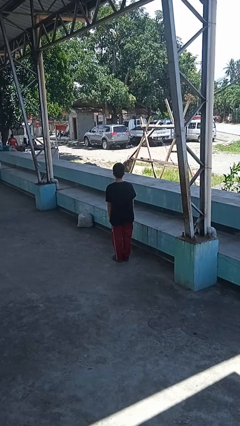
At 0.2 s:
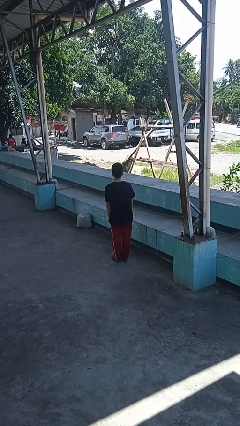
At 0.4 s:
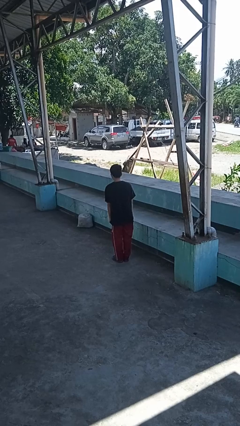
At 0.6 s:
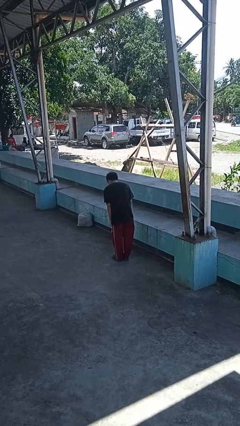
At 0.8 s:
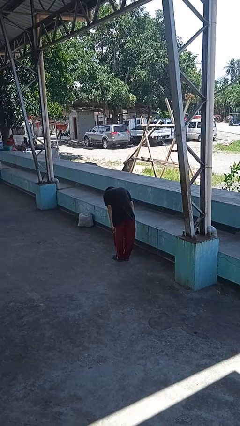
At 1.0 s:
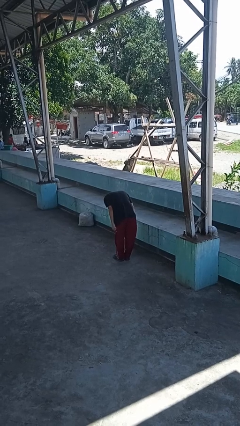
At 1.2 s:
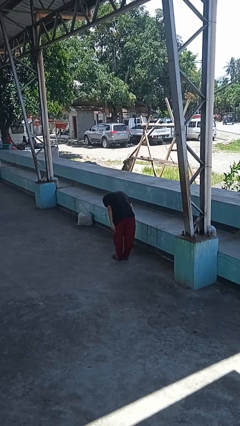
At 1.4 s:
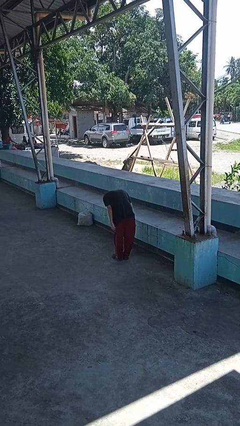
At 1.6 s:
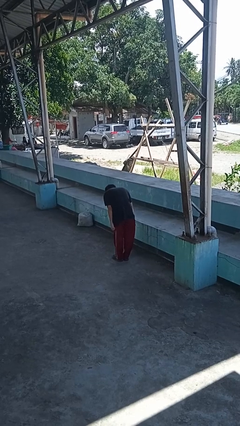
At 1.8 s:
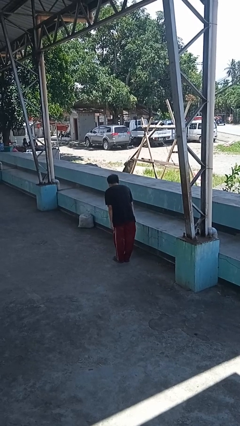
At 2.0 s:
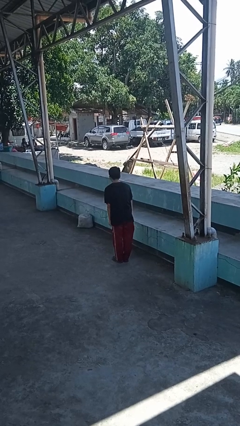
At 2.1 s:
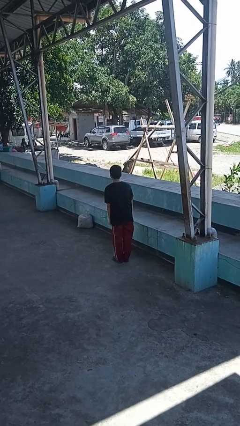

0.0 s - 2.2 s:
person bows

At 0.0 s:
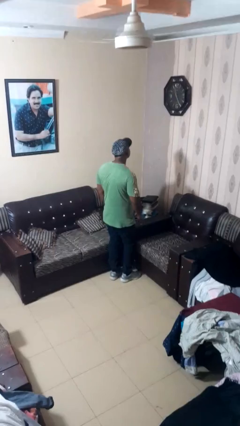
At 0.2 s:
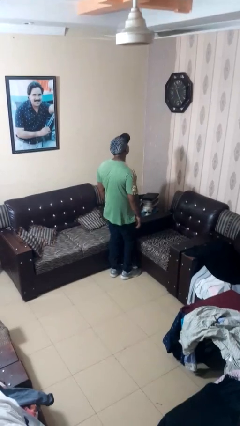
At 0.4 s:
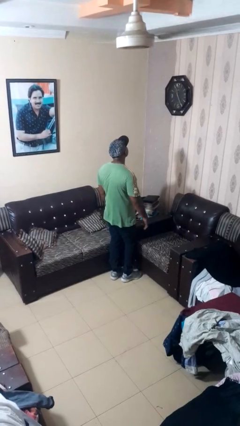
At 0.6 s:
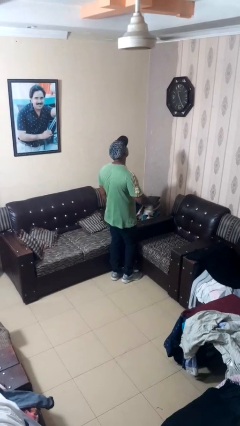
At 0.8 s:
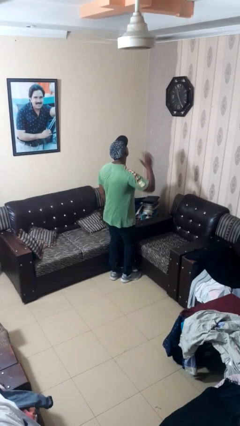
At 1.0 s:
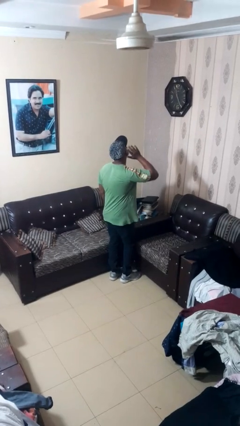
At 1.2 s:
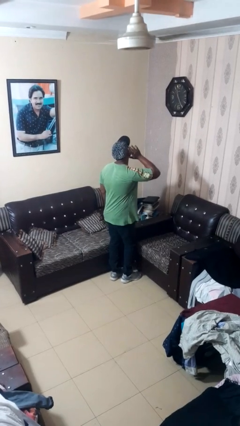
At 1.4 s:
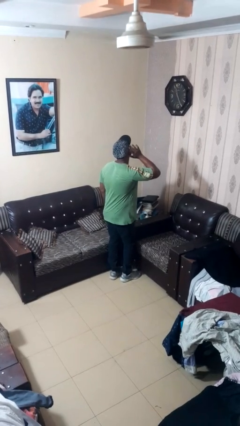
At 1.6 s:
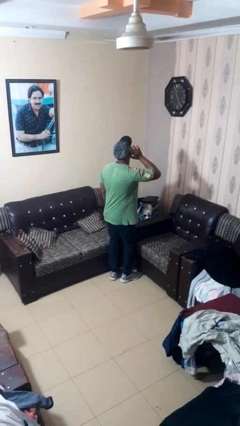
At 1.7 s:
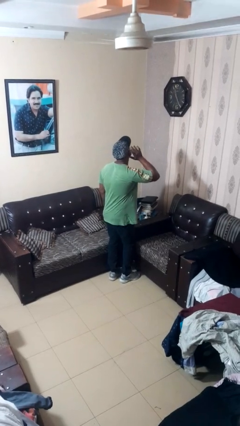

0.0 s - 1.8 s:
person gestures listen closely

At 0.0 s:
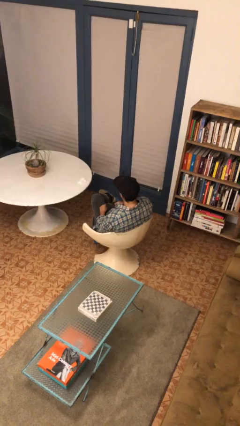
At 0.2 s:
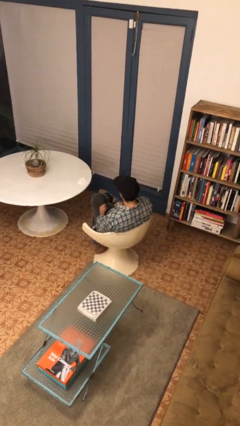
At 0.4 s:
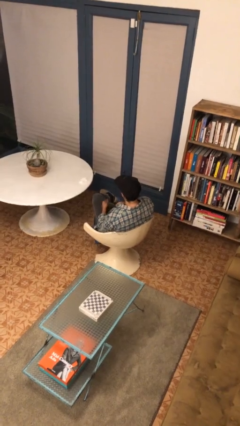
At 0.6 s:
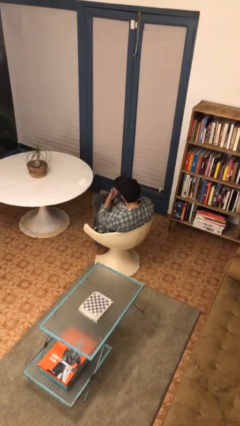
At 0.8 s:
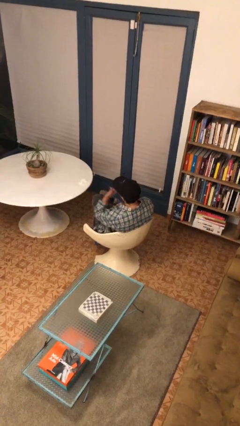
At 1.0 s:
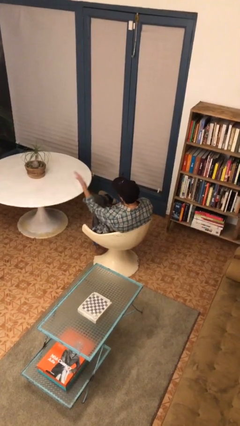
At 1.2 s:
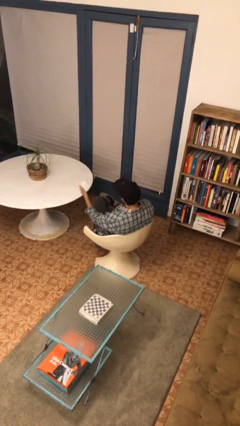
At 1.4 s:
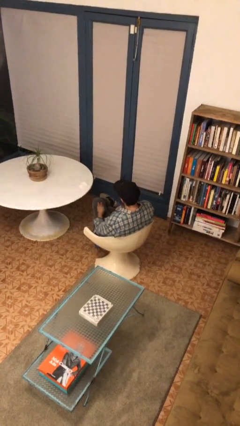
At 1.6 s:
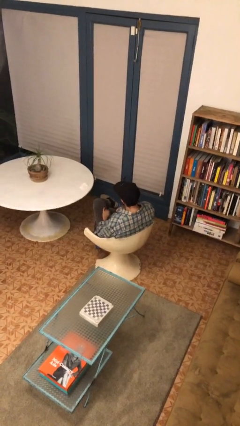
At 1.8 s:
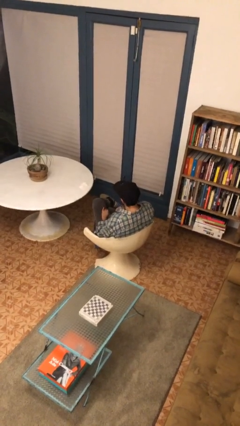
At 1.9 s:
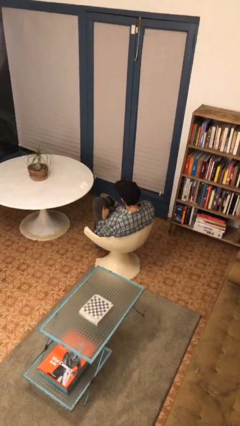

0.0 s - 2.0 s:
person gestures blow kiss

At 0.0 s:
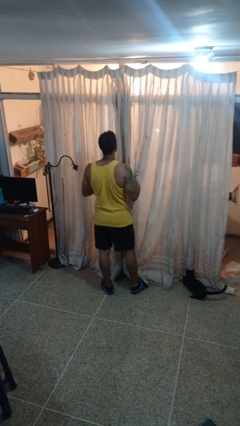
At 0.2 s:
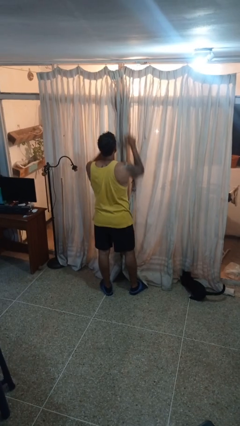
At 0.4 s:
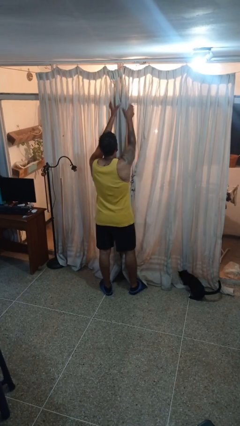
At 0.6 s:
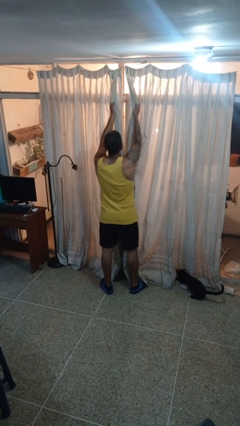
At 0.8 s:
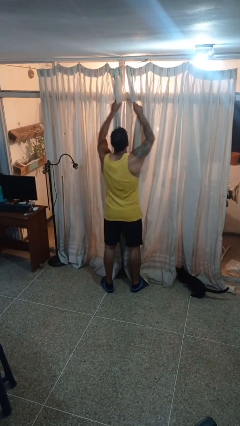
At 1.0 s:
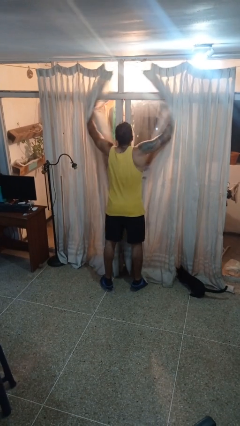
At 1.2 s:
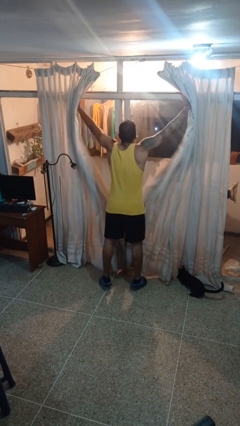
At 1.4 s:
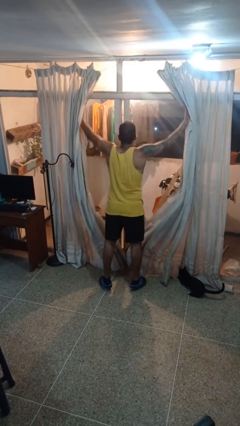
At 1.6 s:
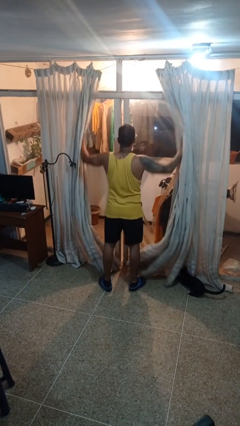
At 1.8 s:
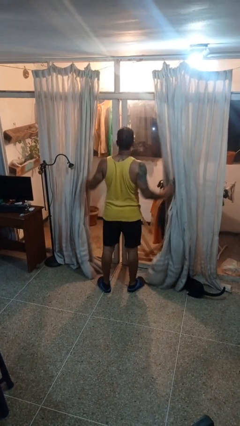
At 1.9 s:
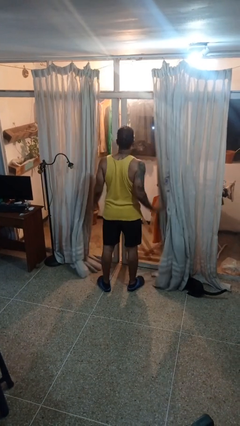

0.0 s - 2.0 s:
person opens curtains

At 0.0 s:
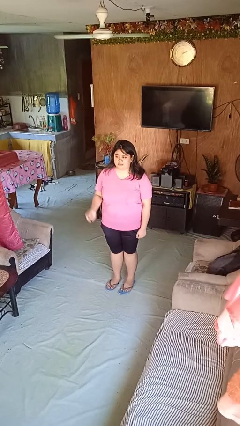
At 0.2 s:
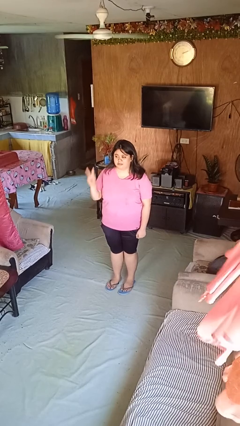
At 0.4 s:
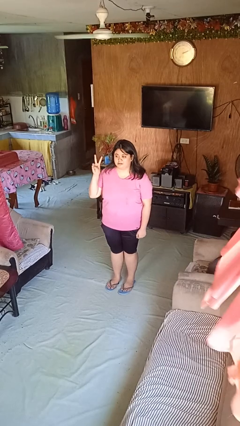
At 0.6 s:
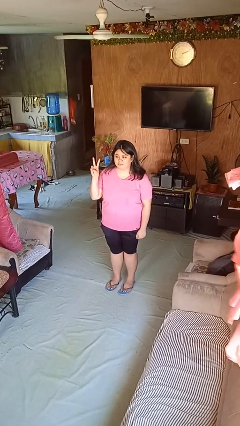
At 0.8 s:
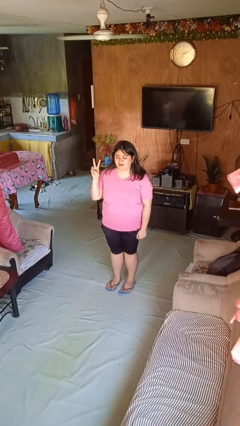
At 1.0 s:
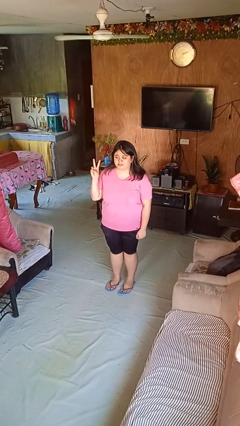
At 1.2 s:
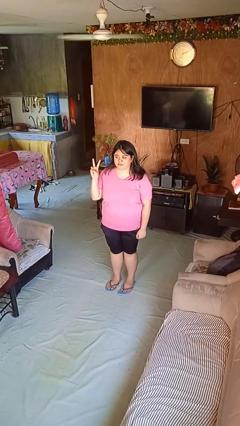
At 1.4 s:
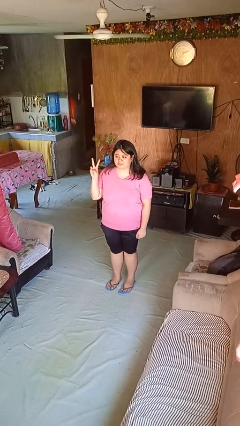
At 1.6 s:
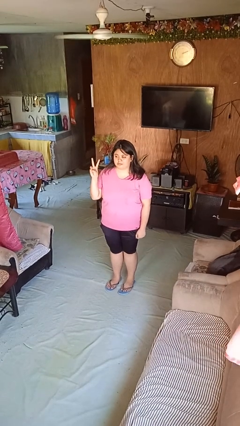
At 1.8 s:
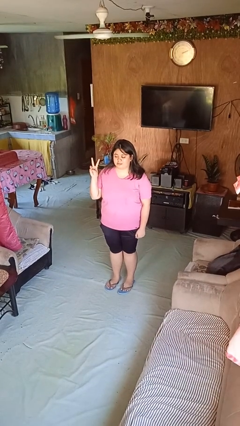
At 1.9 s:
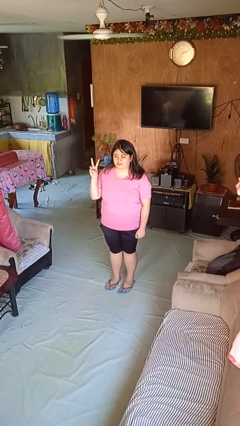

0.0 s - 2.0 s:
person gestures peace

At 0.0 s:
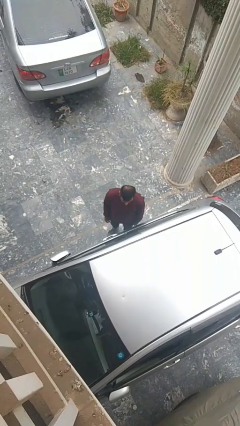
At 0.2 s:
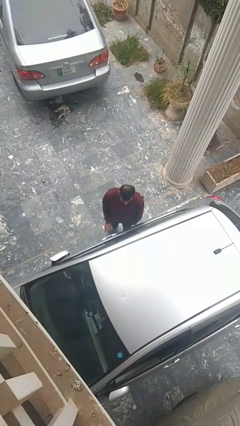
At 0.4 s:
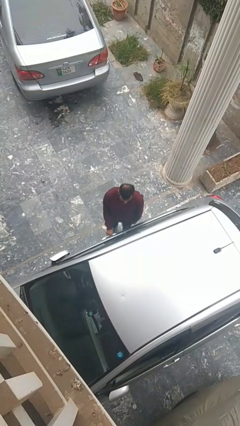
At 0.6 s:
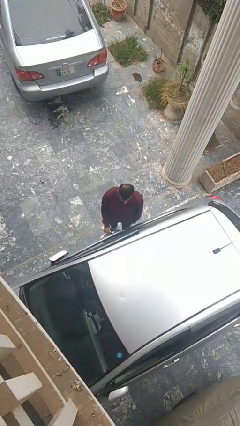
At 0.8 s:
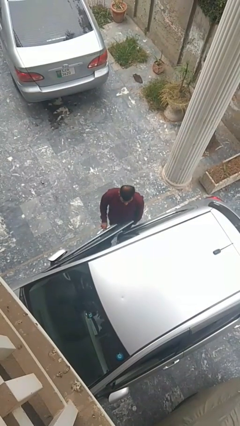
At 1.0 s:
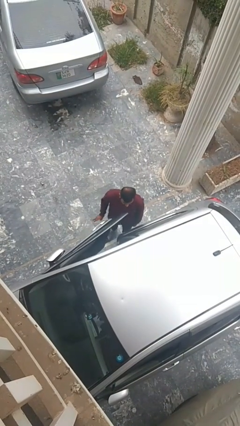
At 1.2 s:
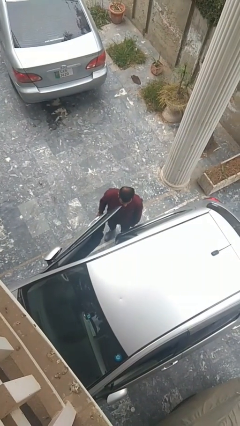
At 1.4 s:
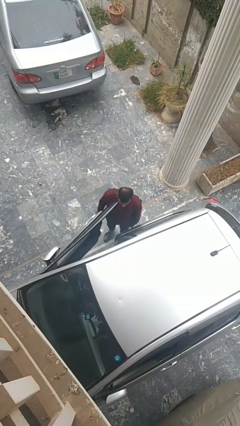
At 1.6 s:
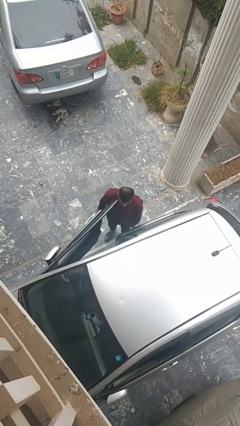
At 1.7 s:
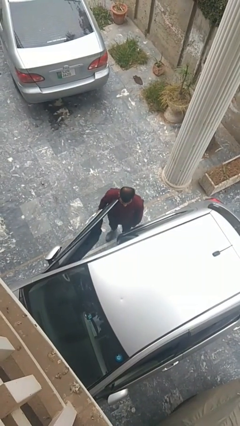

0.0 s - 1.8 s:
person opens car door

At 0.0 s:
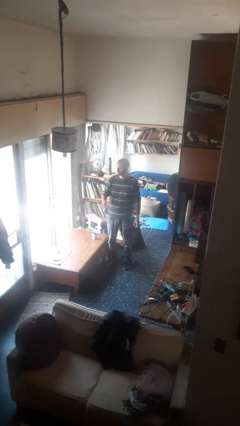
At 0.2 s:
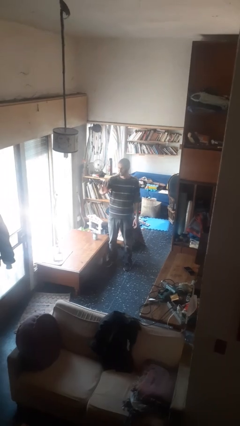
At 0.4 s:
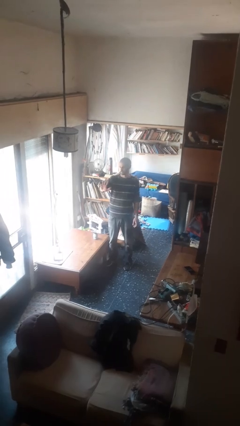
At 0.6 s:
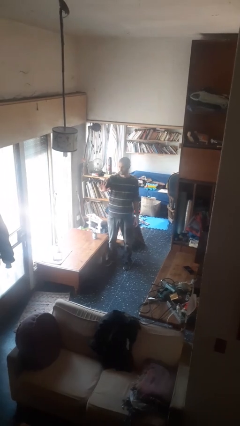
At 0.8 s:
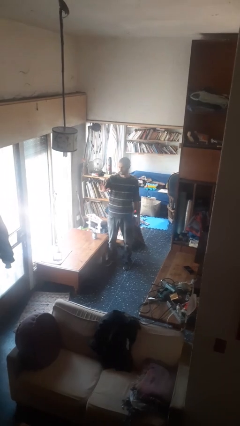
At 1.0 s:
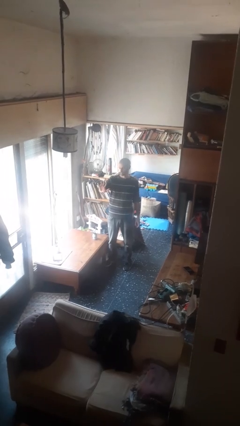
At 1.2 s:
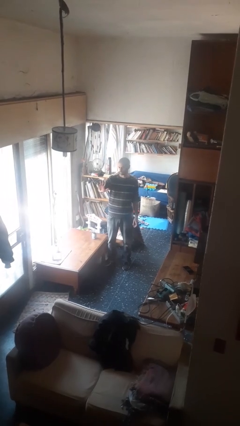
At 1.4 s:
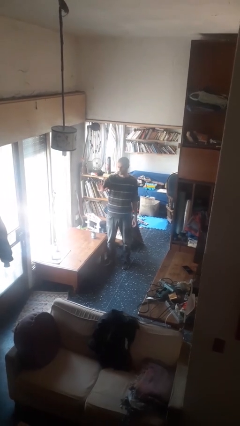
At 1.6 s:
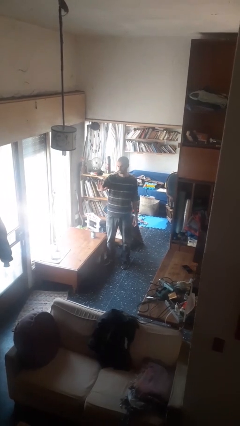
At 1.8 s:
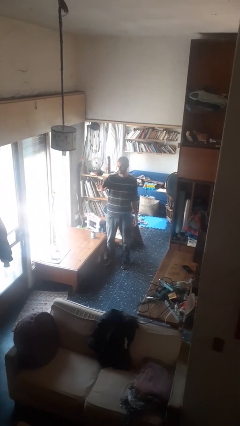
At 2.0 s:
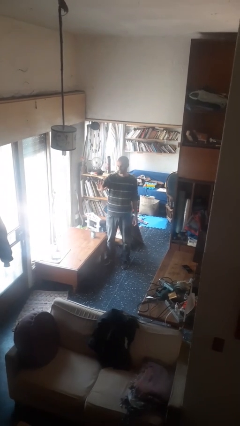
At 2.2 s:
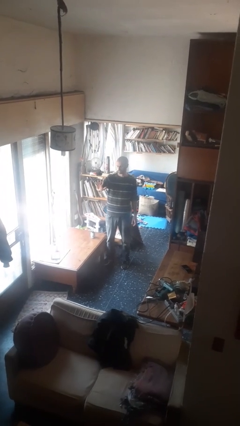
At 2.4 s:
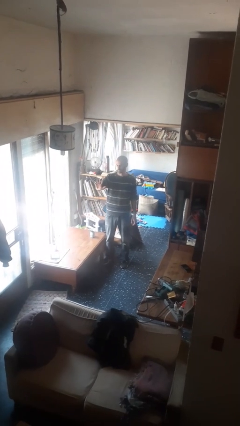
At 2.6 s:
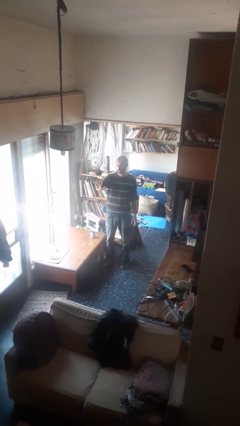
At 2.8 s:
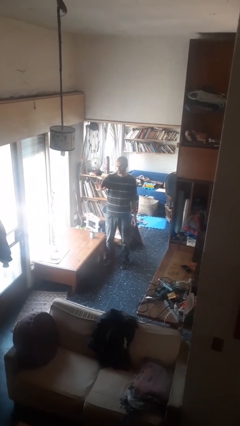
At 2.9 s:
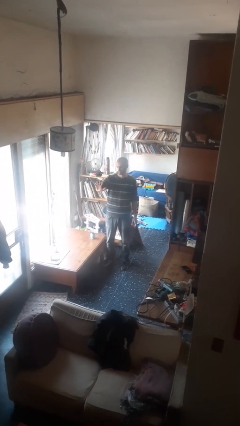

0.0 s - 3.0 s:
person gestures number five

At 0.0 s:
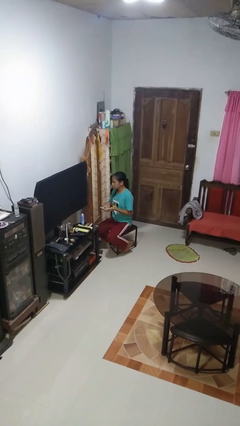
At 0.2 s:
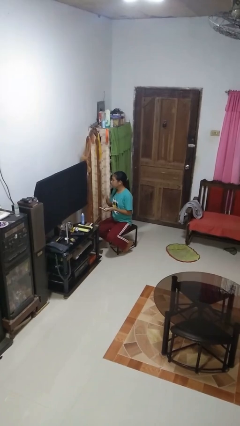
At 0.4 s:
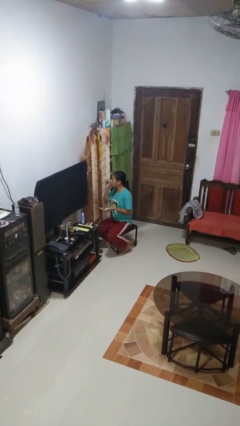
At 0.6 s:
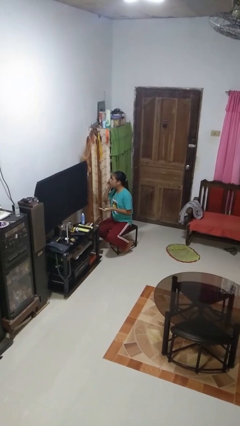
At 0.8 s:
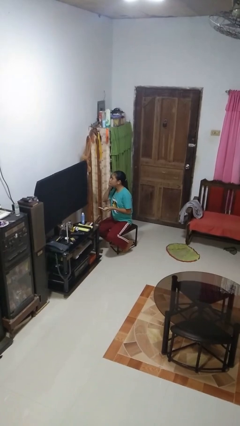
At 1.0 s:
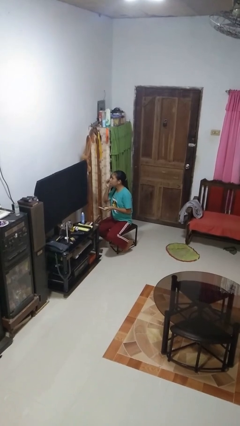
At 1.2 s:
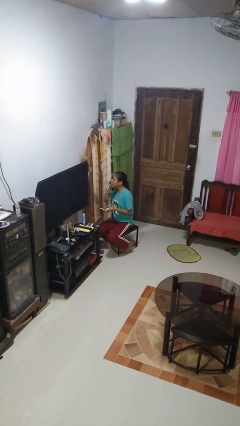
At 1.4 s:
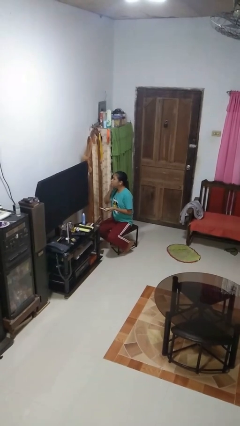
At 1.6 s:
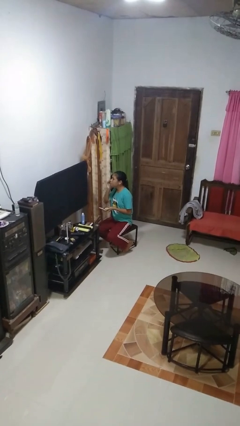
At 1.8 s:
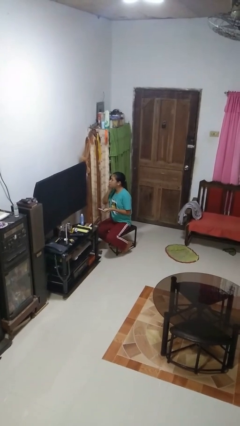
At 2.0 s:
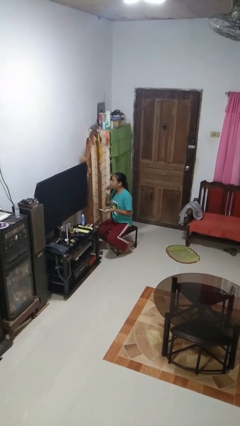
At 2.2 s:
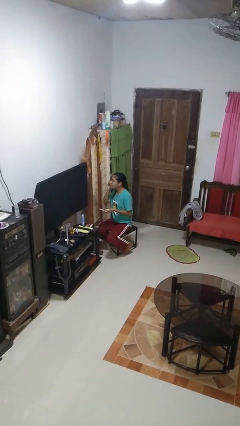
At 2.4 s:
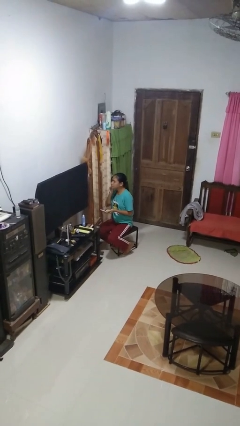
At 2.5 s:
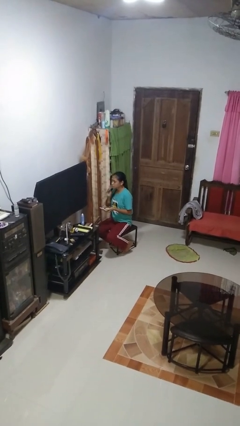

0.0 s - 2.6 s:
person applies foundation makeup
